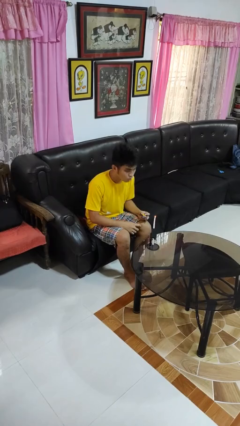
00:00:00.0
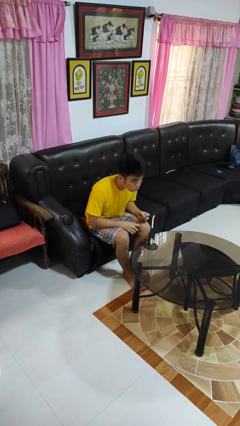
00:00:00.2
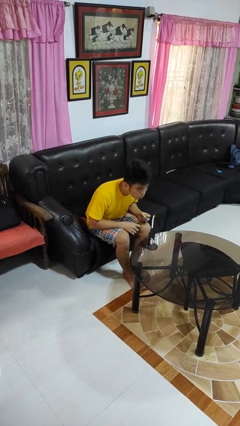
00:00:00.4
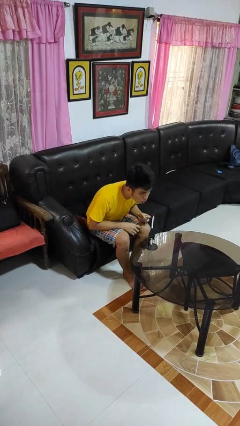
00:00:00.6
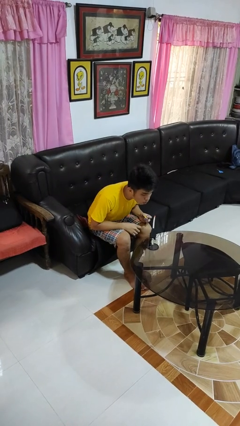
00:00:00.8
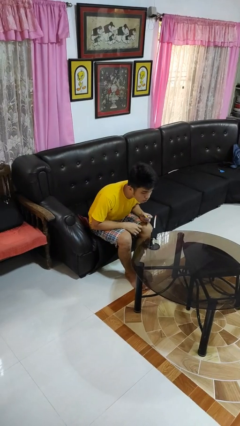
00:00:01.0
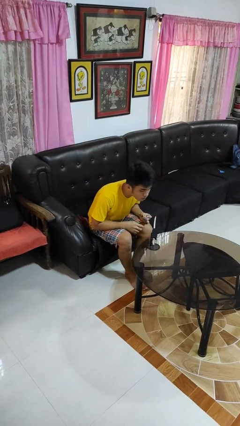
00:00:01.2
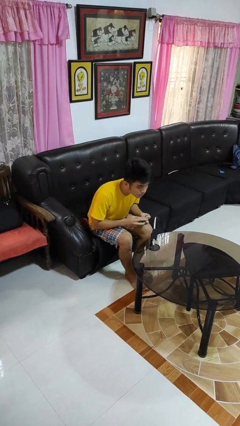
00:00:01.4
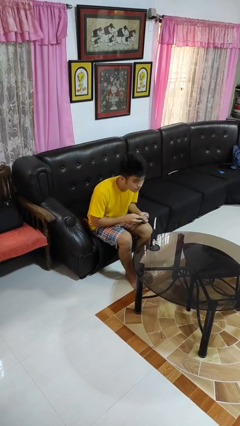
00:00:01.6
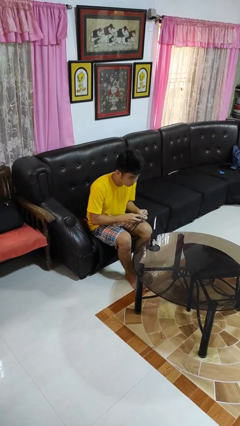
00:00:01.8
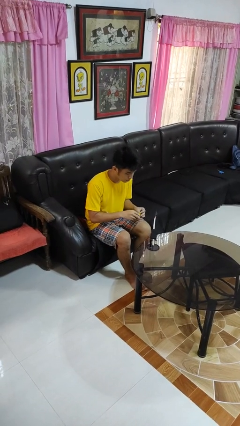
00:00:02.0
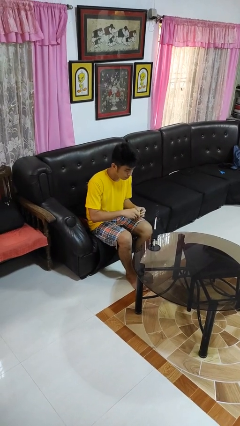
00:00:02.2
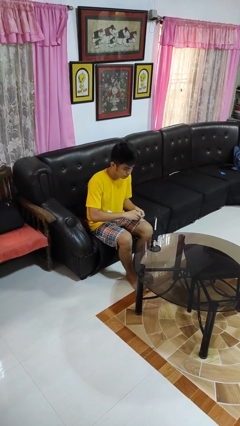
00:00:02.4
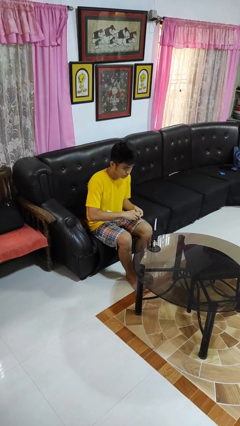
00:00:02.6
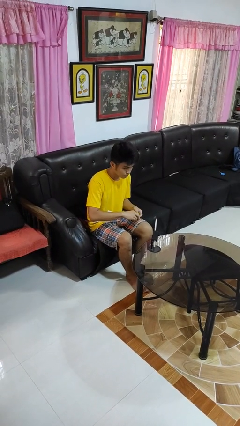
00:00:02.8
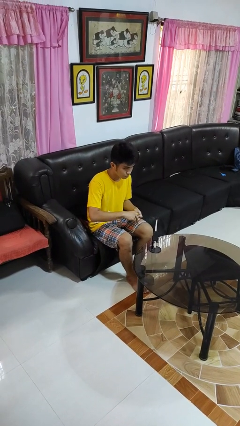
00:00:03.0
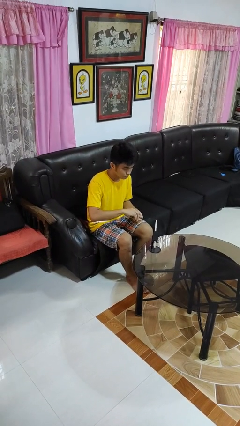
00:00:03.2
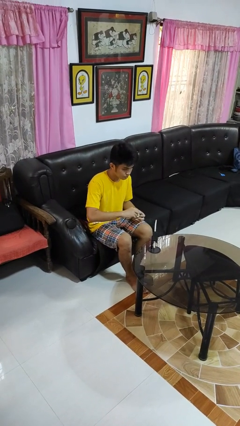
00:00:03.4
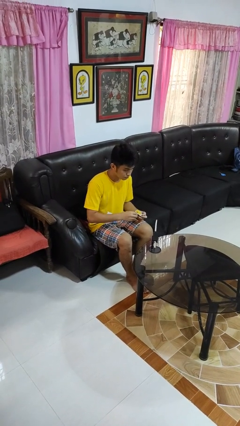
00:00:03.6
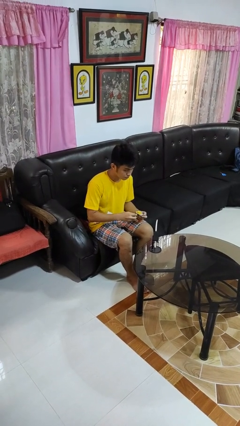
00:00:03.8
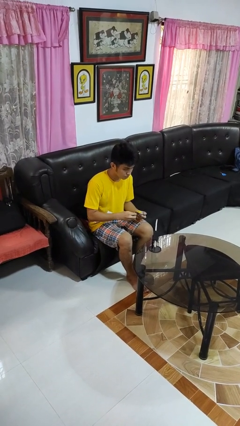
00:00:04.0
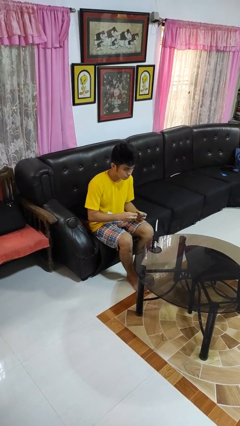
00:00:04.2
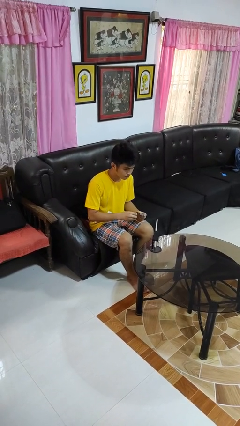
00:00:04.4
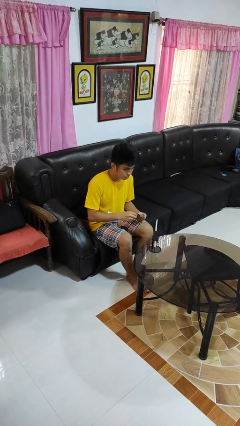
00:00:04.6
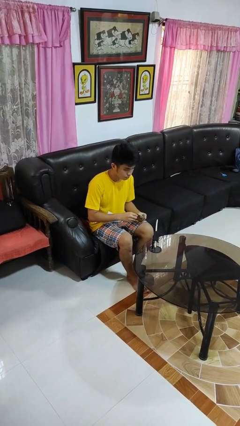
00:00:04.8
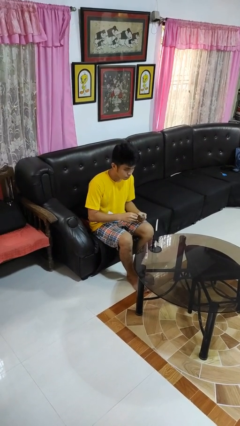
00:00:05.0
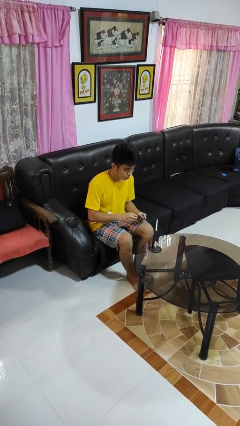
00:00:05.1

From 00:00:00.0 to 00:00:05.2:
person extinguishes candle

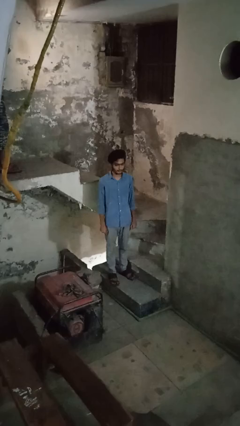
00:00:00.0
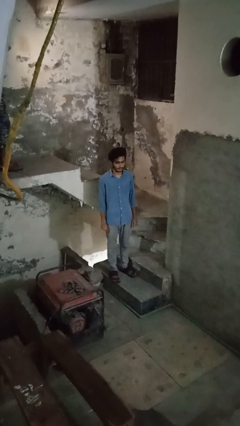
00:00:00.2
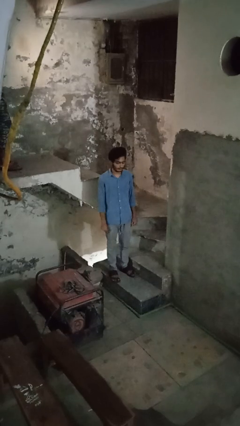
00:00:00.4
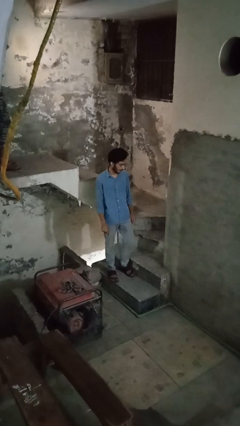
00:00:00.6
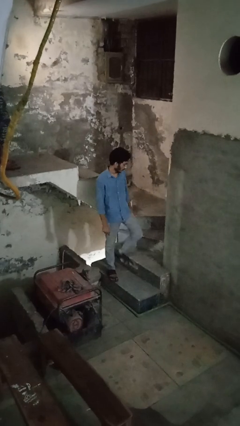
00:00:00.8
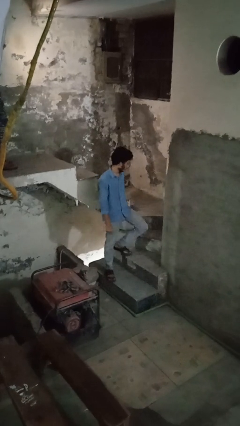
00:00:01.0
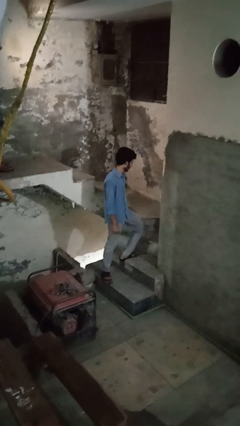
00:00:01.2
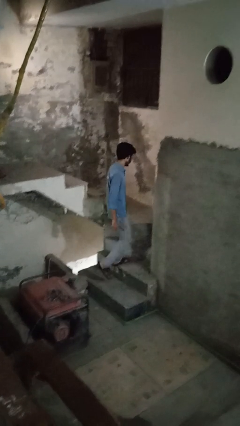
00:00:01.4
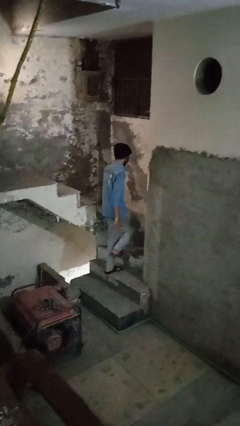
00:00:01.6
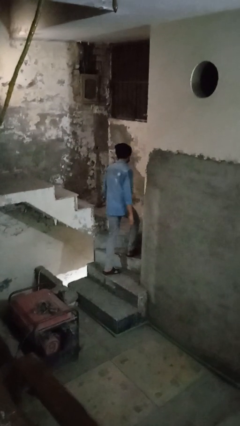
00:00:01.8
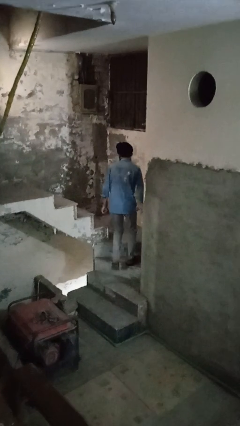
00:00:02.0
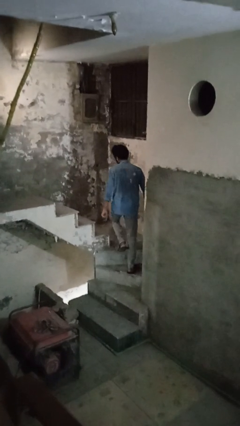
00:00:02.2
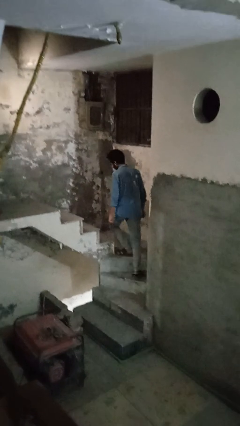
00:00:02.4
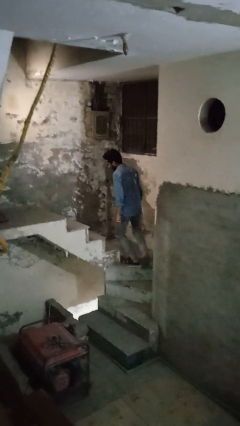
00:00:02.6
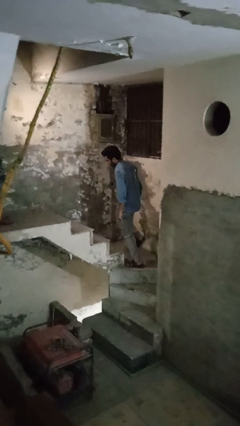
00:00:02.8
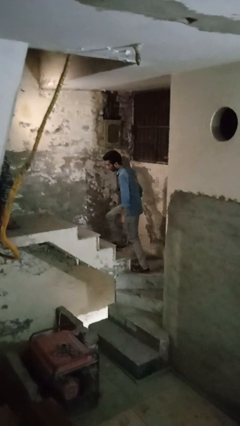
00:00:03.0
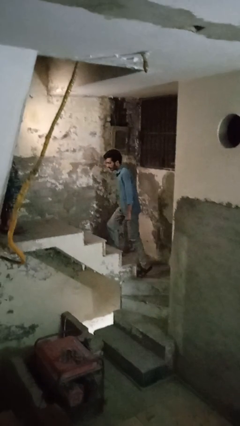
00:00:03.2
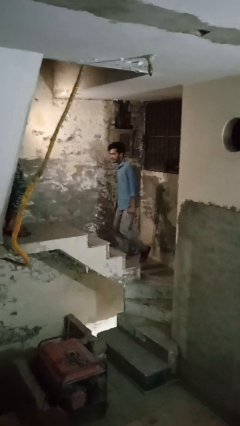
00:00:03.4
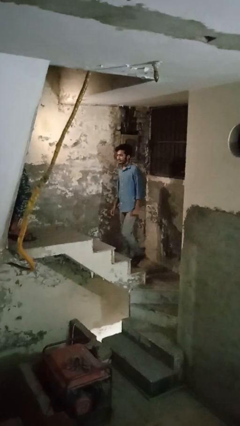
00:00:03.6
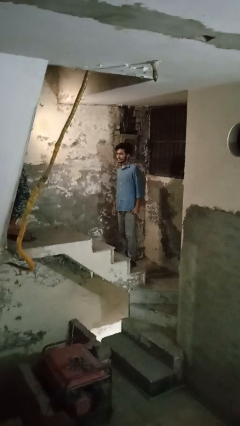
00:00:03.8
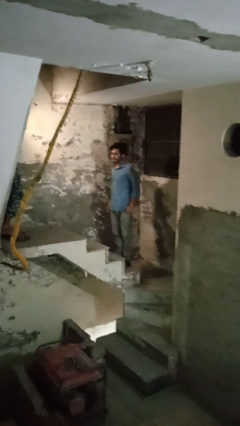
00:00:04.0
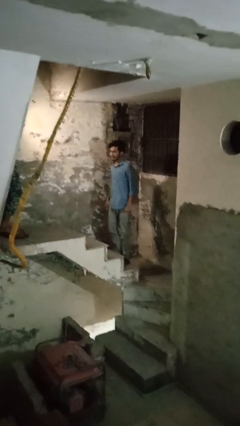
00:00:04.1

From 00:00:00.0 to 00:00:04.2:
person climbs up stairs

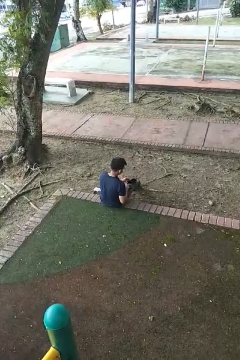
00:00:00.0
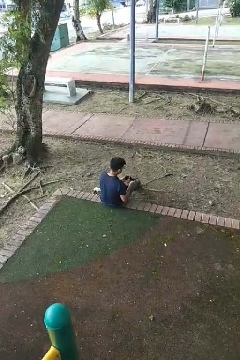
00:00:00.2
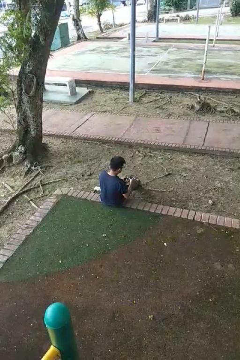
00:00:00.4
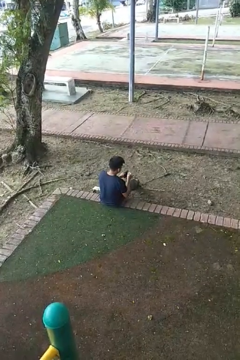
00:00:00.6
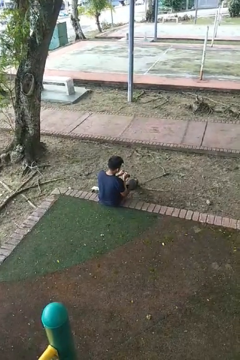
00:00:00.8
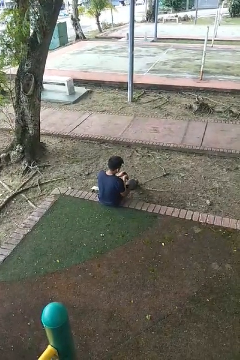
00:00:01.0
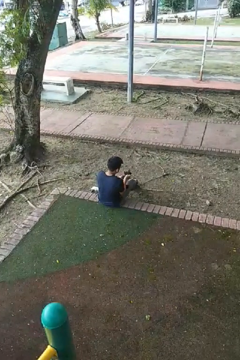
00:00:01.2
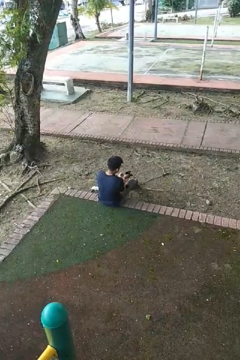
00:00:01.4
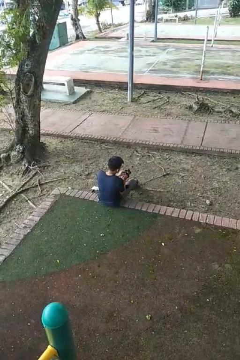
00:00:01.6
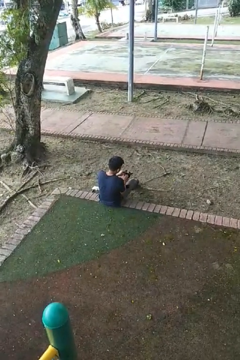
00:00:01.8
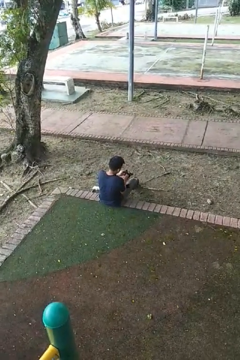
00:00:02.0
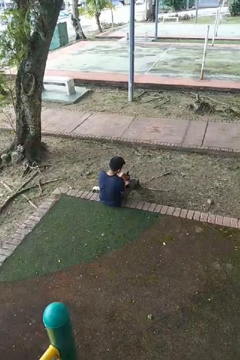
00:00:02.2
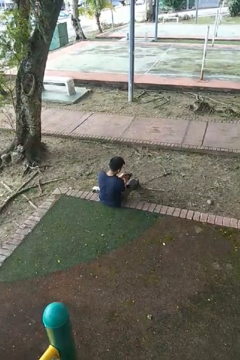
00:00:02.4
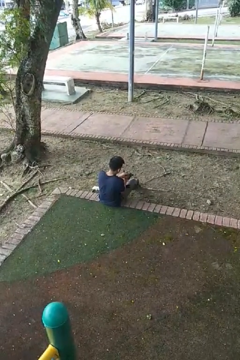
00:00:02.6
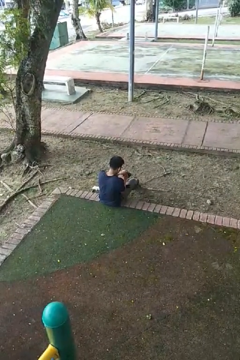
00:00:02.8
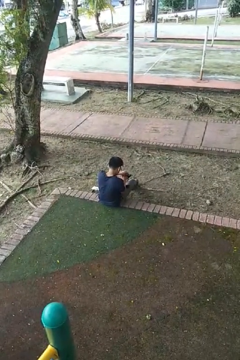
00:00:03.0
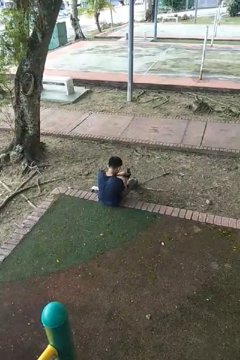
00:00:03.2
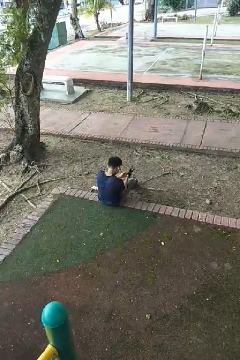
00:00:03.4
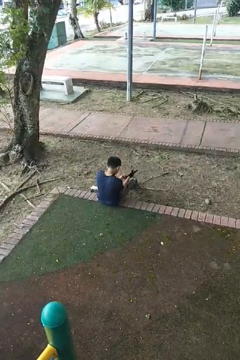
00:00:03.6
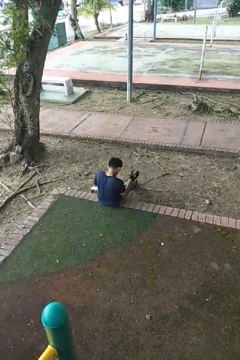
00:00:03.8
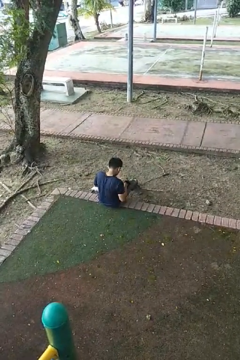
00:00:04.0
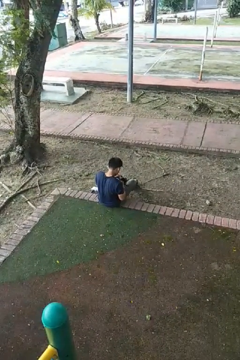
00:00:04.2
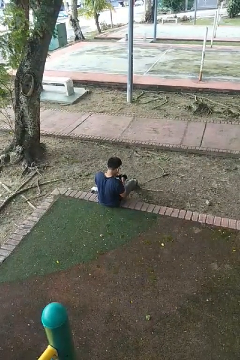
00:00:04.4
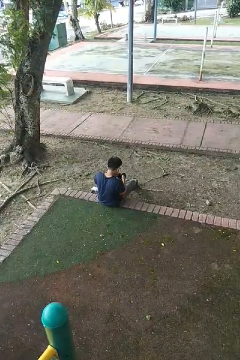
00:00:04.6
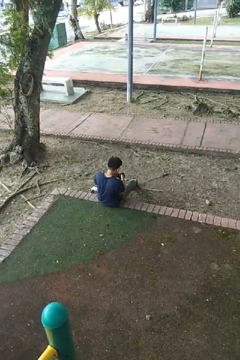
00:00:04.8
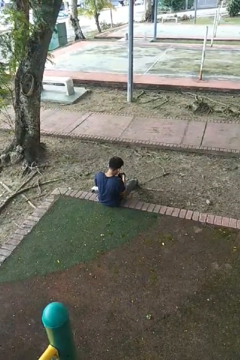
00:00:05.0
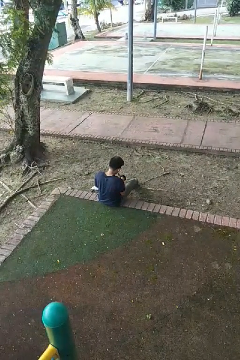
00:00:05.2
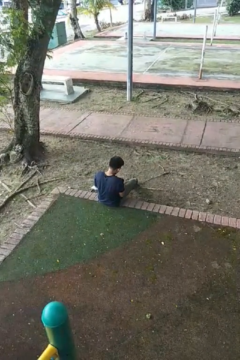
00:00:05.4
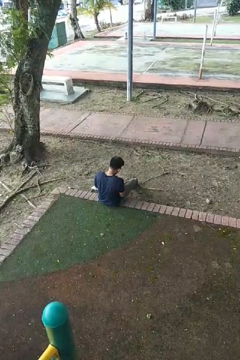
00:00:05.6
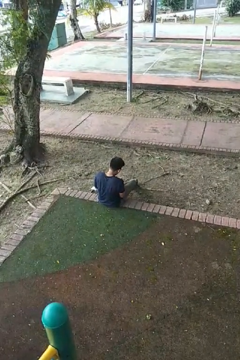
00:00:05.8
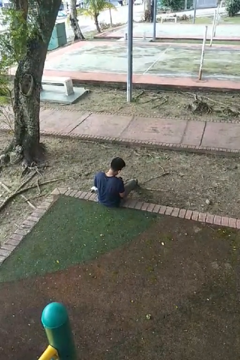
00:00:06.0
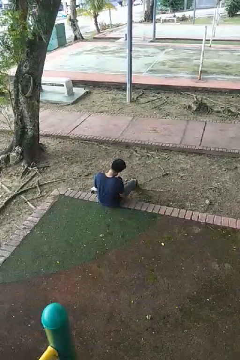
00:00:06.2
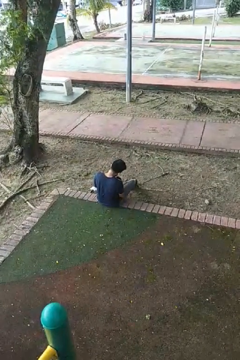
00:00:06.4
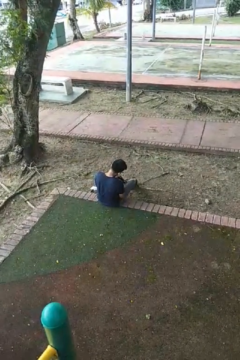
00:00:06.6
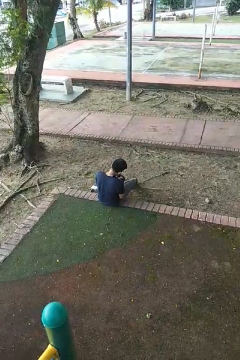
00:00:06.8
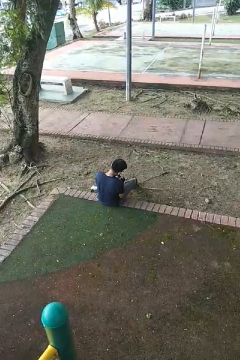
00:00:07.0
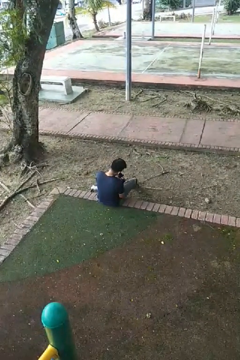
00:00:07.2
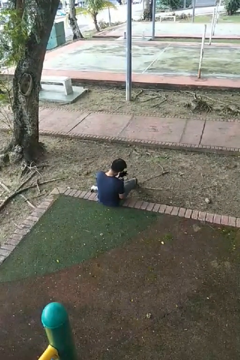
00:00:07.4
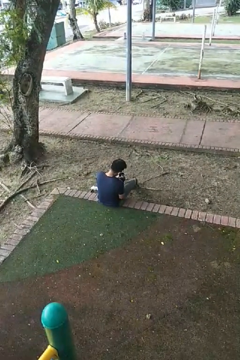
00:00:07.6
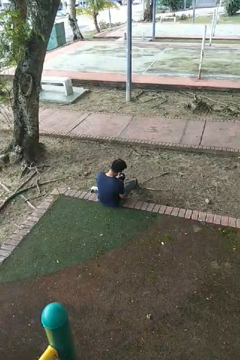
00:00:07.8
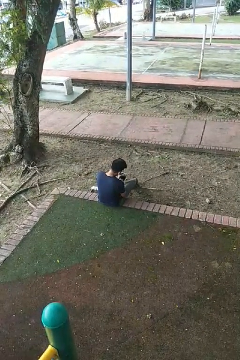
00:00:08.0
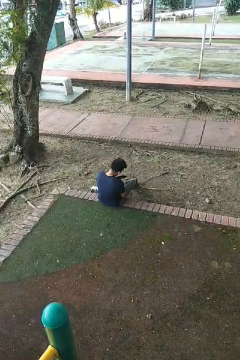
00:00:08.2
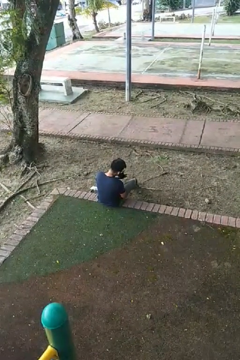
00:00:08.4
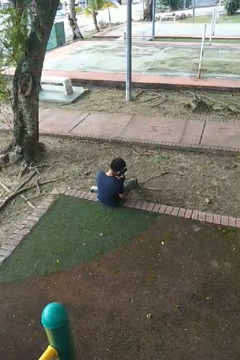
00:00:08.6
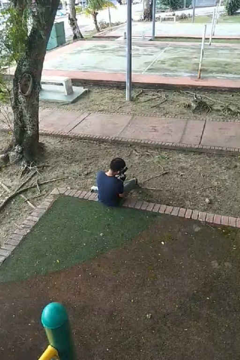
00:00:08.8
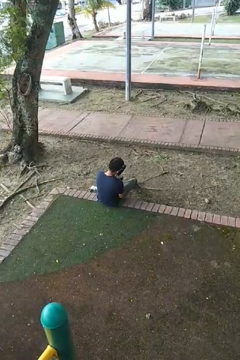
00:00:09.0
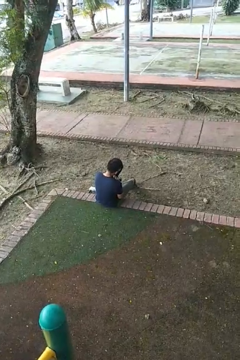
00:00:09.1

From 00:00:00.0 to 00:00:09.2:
person puts on gloves

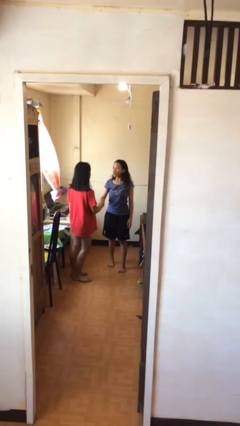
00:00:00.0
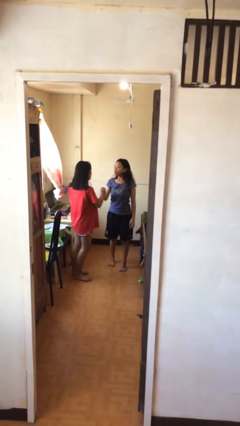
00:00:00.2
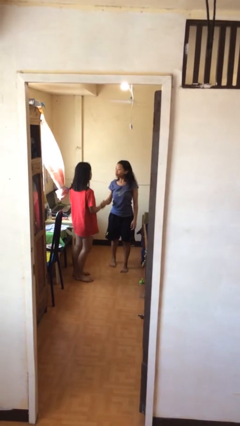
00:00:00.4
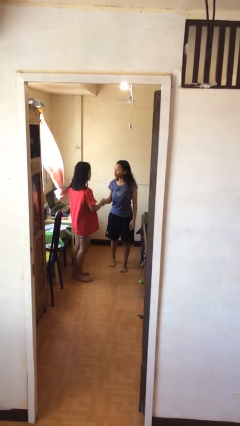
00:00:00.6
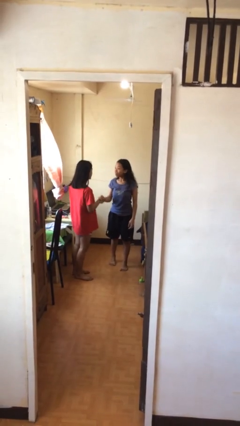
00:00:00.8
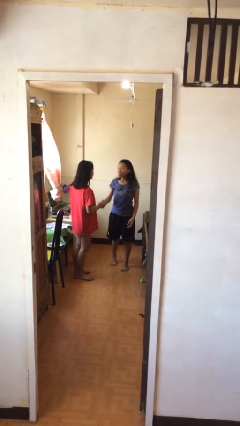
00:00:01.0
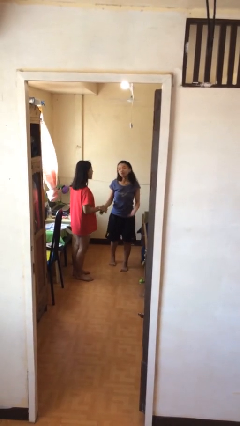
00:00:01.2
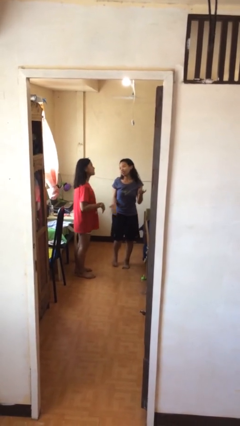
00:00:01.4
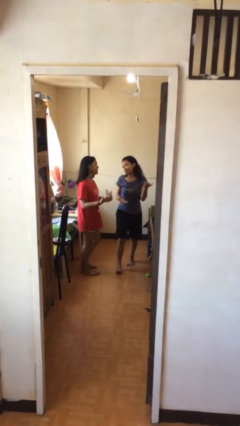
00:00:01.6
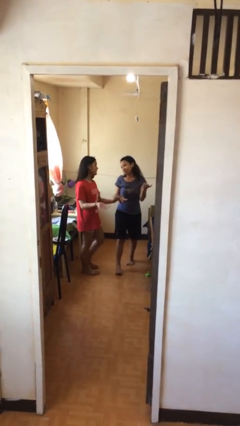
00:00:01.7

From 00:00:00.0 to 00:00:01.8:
person shakes hand
